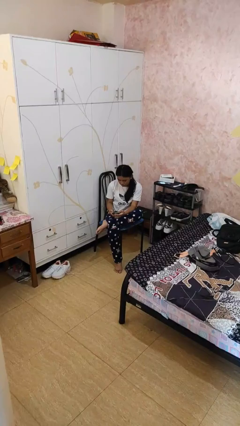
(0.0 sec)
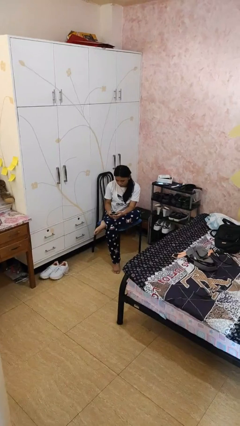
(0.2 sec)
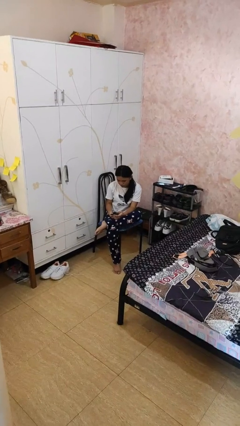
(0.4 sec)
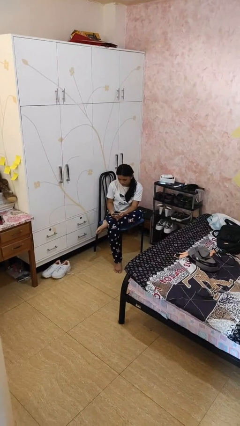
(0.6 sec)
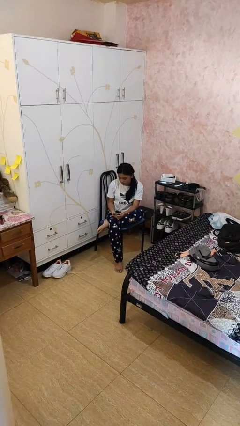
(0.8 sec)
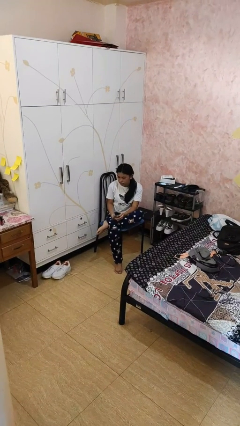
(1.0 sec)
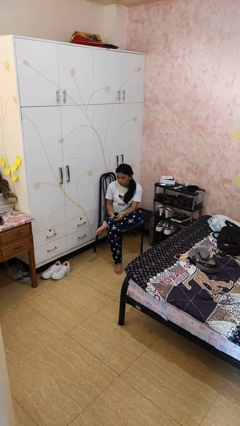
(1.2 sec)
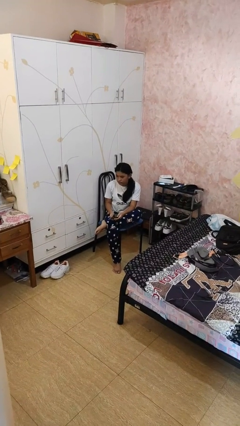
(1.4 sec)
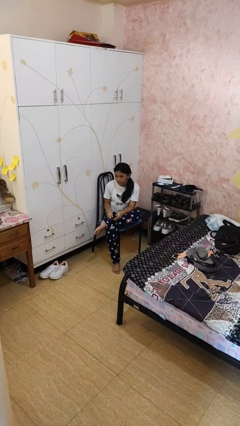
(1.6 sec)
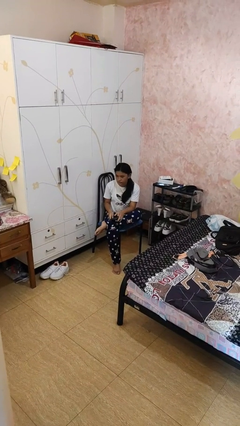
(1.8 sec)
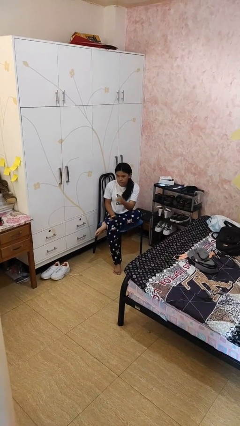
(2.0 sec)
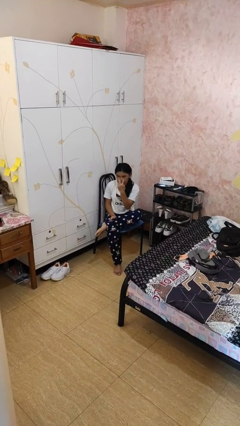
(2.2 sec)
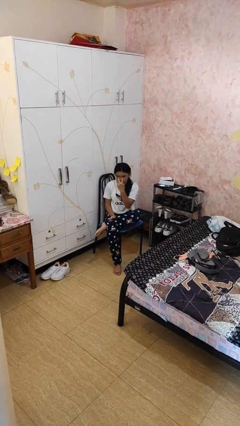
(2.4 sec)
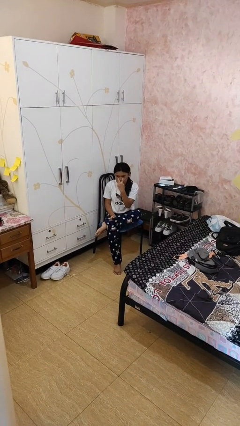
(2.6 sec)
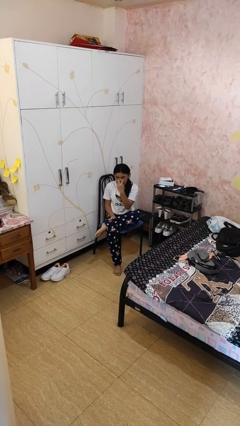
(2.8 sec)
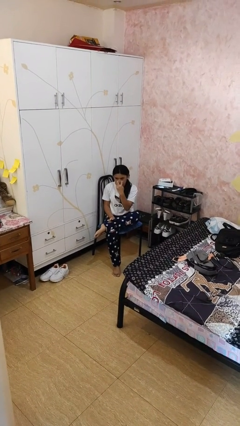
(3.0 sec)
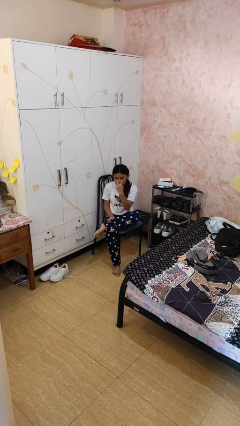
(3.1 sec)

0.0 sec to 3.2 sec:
person gestures watch closely

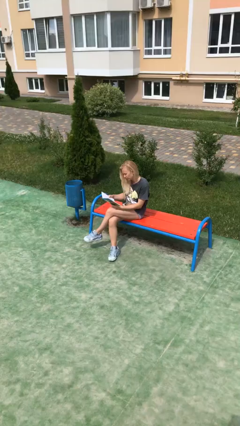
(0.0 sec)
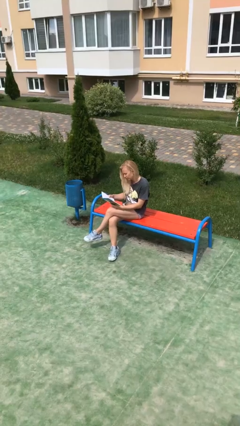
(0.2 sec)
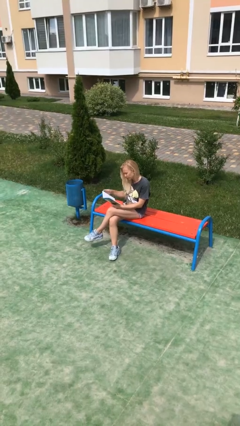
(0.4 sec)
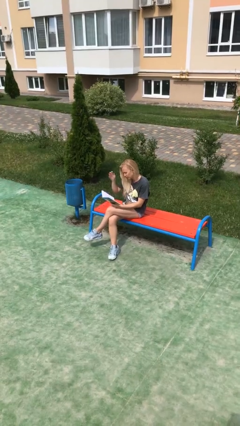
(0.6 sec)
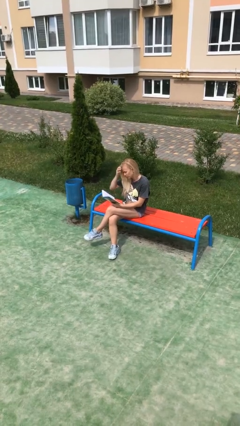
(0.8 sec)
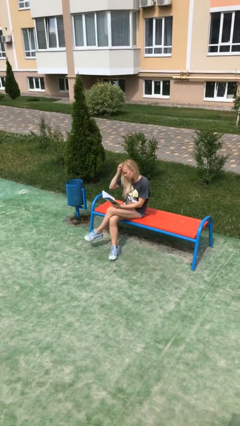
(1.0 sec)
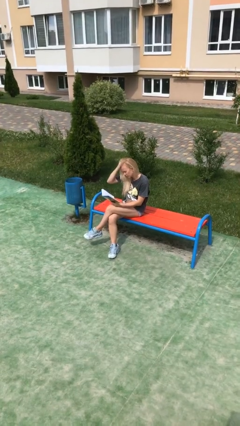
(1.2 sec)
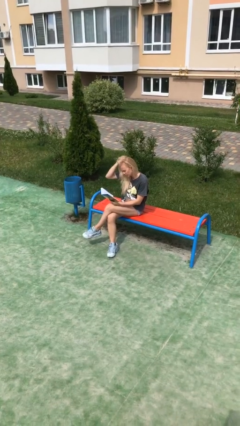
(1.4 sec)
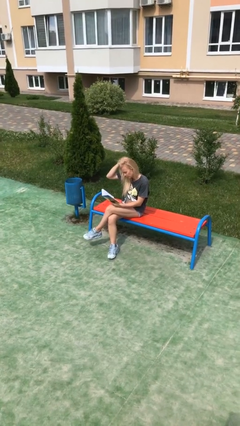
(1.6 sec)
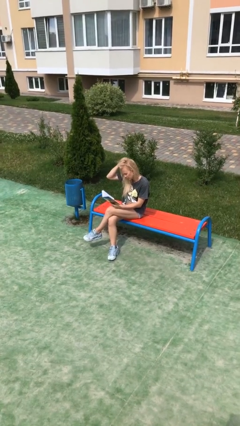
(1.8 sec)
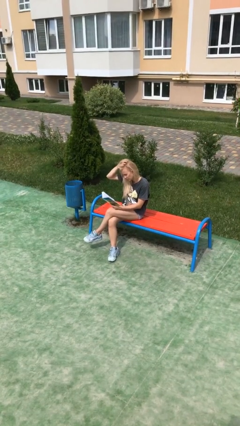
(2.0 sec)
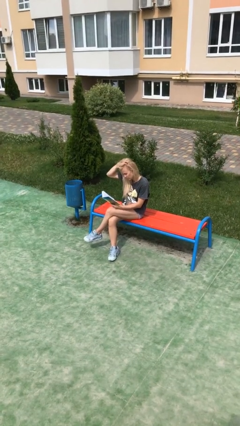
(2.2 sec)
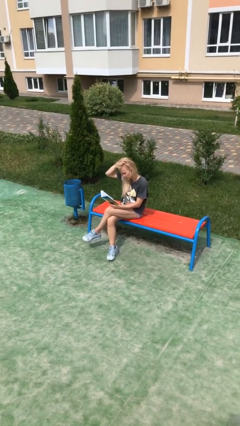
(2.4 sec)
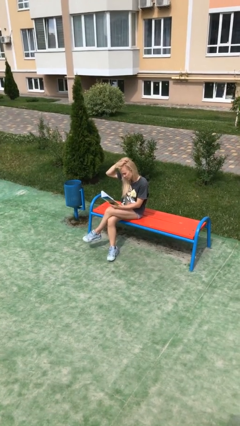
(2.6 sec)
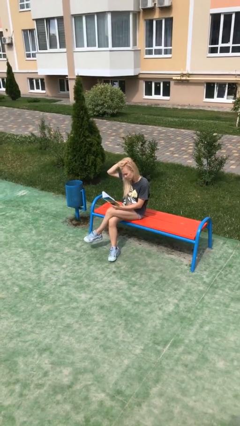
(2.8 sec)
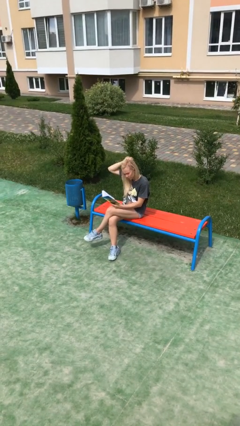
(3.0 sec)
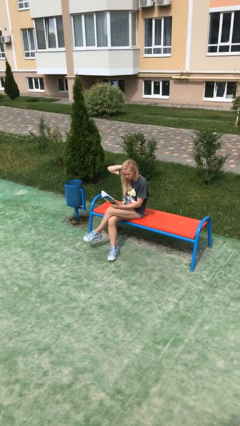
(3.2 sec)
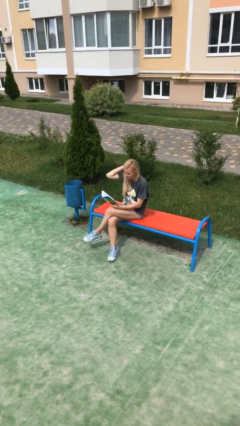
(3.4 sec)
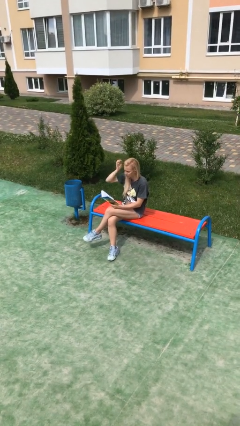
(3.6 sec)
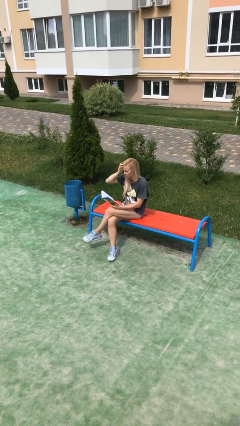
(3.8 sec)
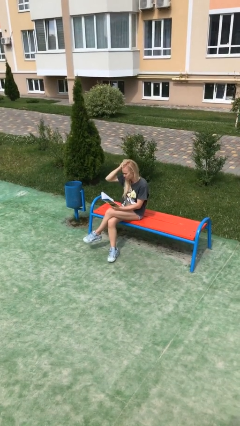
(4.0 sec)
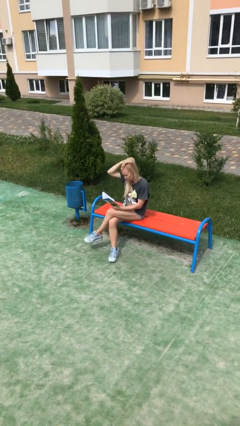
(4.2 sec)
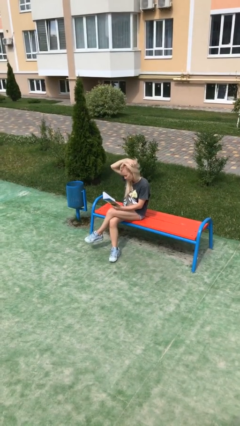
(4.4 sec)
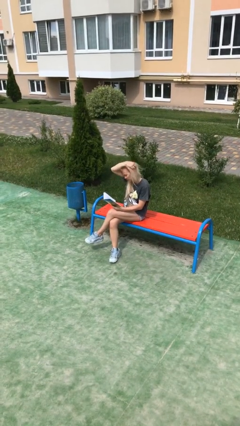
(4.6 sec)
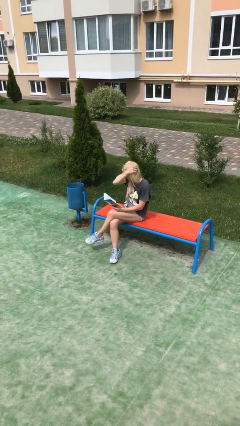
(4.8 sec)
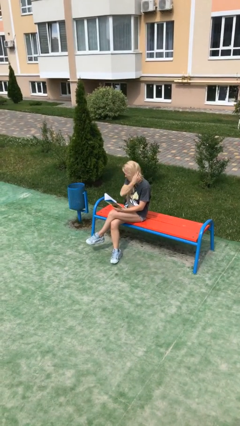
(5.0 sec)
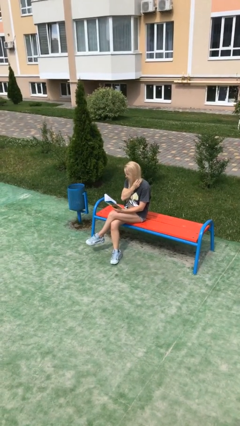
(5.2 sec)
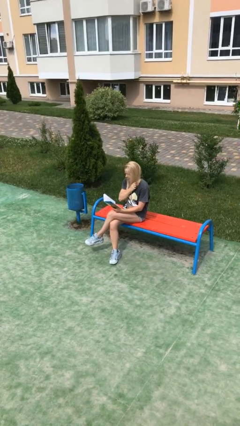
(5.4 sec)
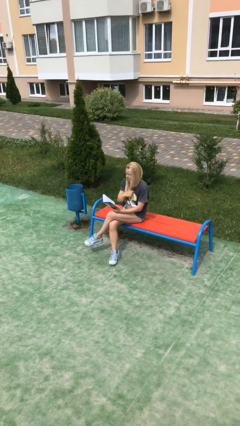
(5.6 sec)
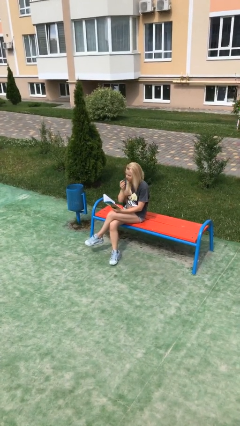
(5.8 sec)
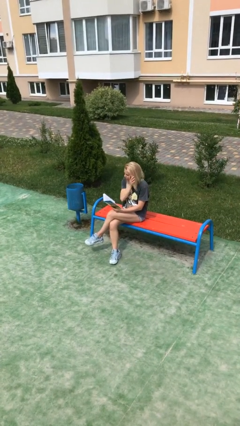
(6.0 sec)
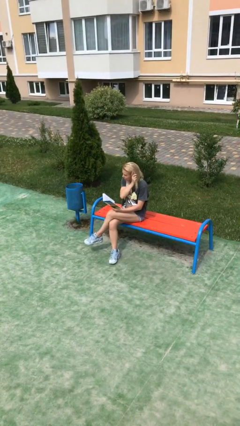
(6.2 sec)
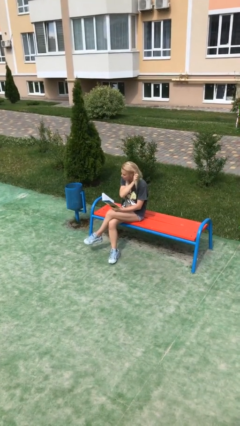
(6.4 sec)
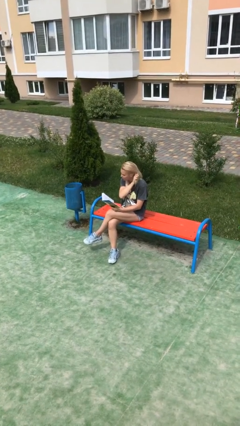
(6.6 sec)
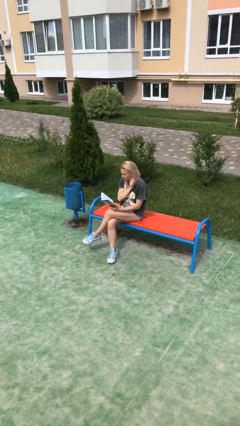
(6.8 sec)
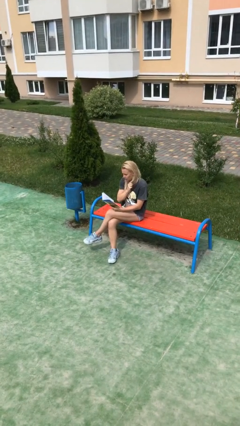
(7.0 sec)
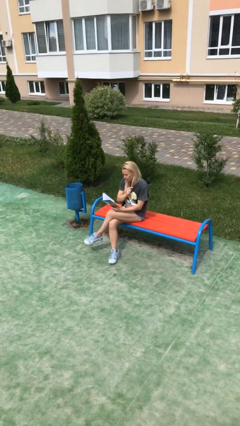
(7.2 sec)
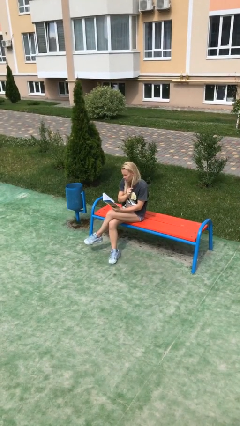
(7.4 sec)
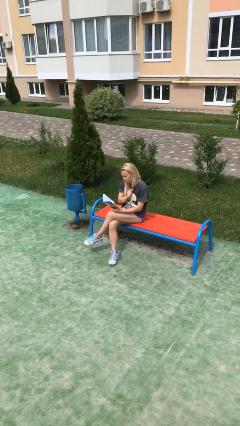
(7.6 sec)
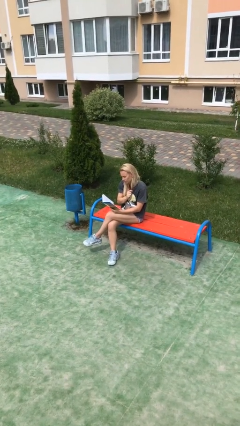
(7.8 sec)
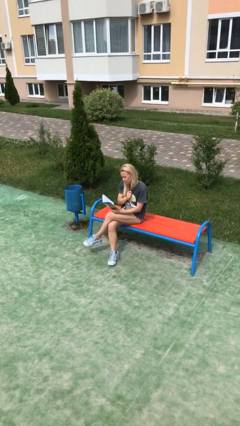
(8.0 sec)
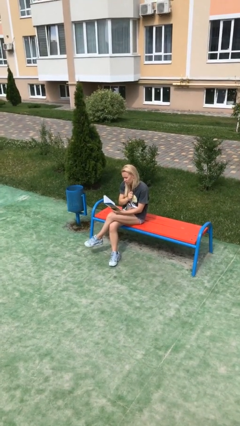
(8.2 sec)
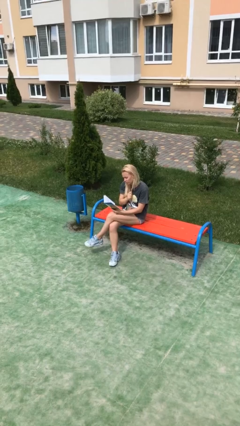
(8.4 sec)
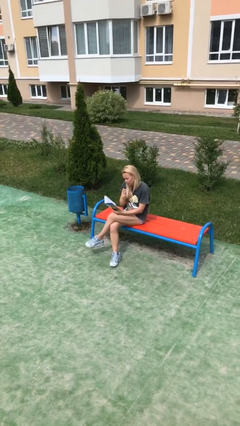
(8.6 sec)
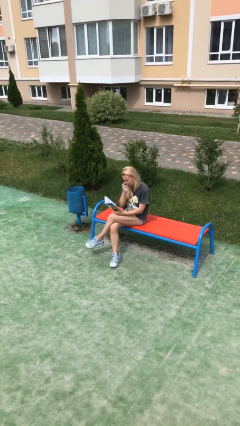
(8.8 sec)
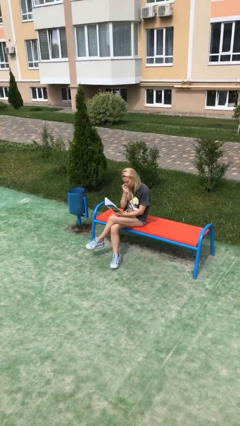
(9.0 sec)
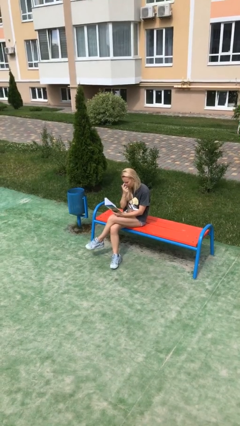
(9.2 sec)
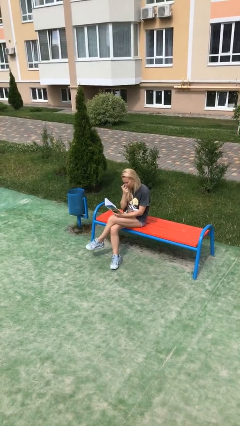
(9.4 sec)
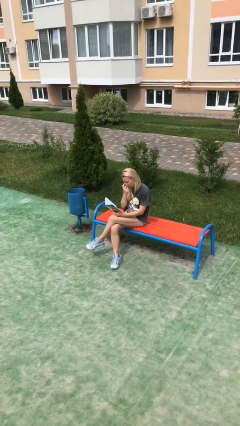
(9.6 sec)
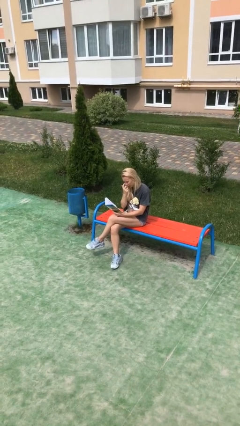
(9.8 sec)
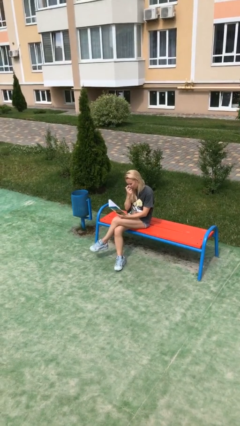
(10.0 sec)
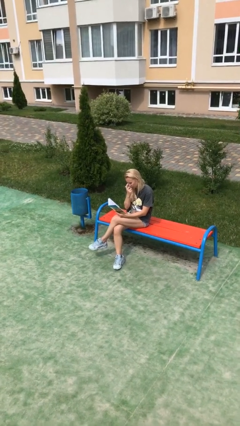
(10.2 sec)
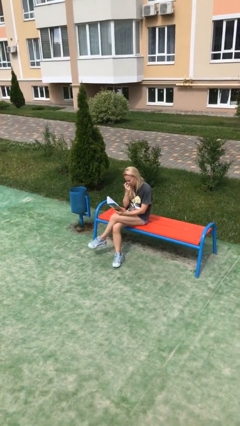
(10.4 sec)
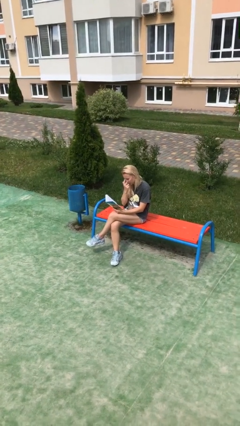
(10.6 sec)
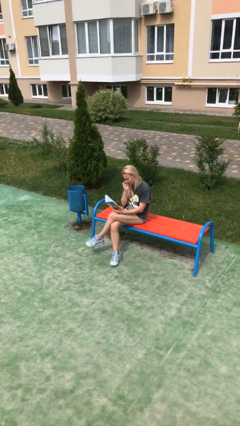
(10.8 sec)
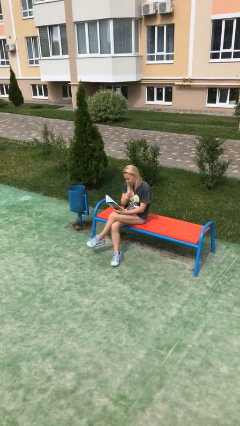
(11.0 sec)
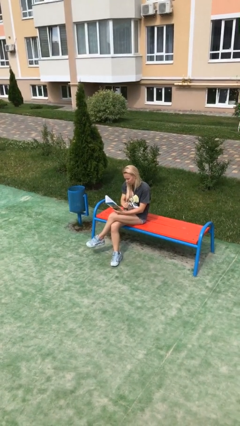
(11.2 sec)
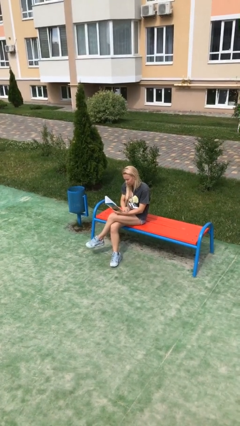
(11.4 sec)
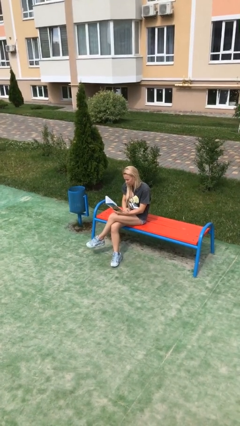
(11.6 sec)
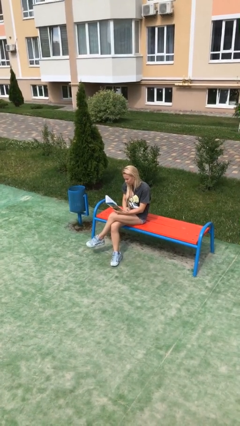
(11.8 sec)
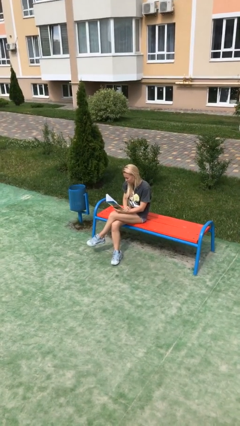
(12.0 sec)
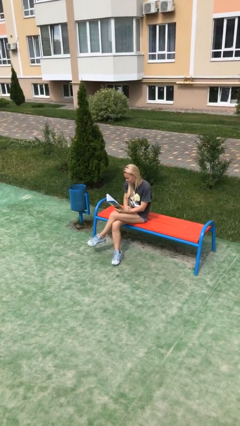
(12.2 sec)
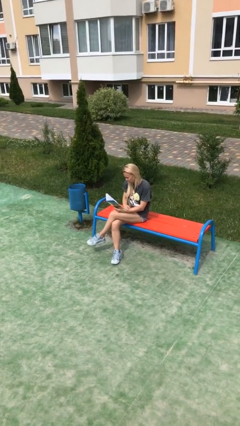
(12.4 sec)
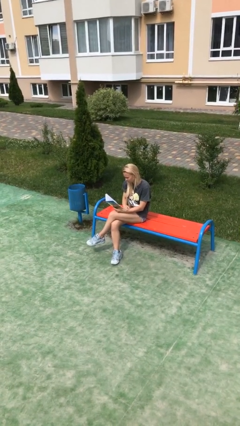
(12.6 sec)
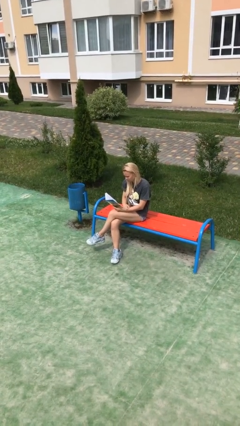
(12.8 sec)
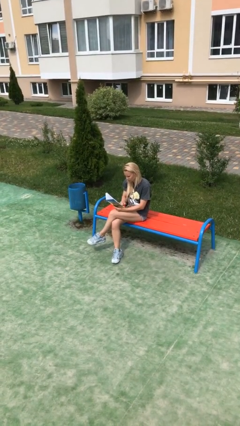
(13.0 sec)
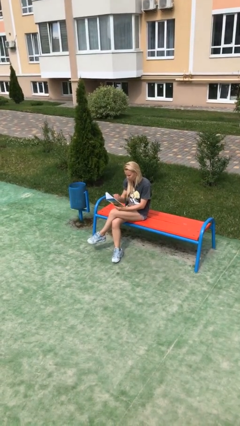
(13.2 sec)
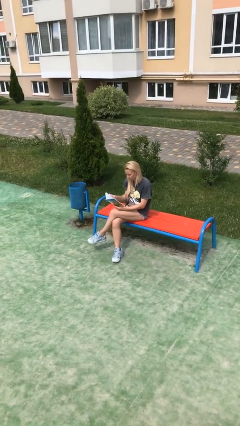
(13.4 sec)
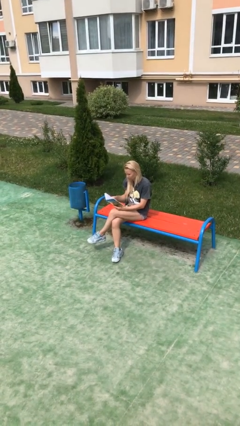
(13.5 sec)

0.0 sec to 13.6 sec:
person reads document

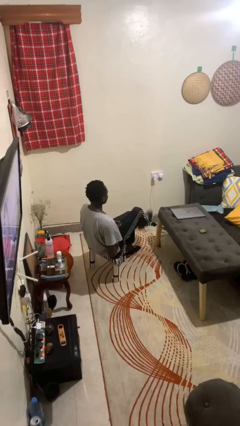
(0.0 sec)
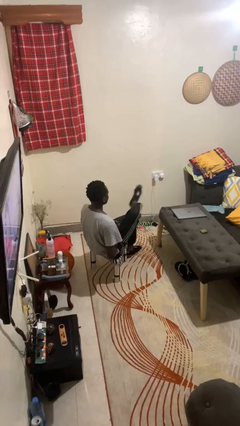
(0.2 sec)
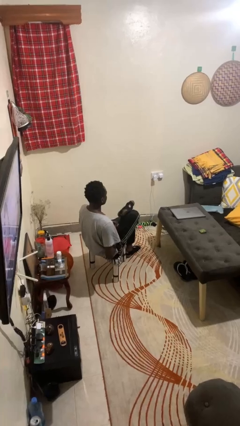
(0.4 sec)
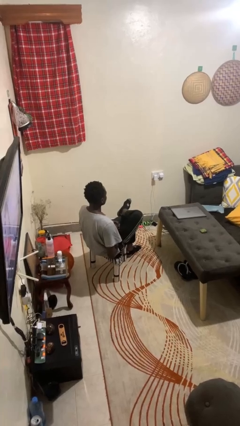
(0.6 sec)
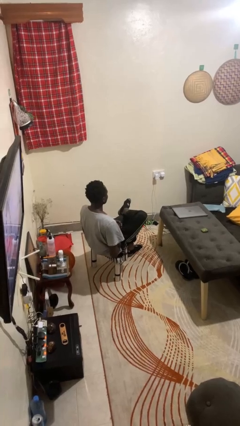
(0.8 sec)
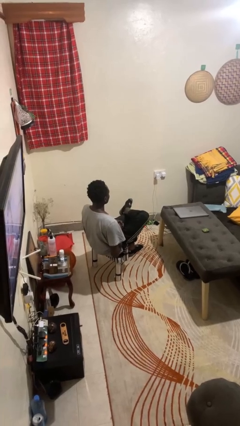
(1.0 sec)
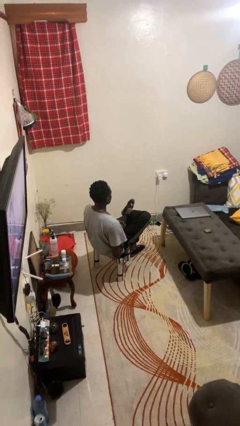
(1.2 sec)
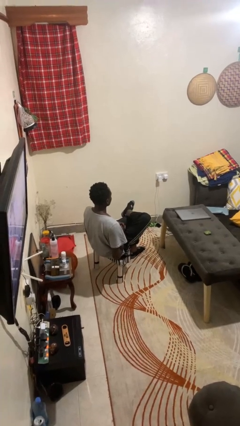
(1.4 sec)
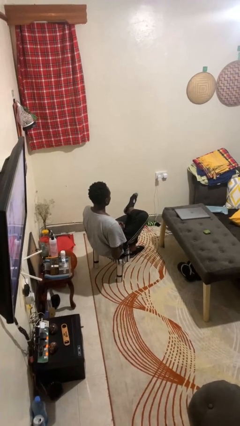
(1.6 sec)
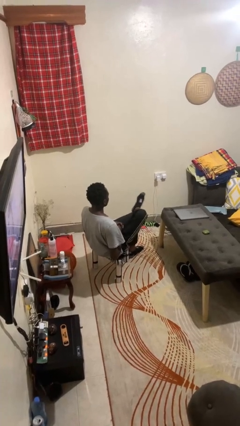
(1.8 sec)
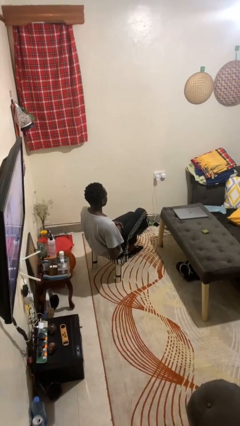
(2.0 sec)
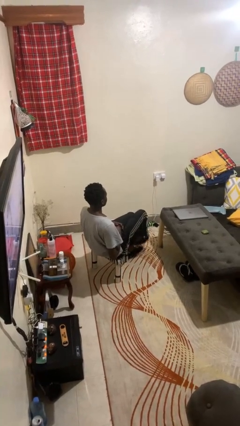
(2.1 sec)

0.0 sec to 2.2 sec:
person crosses legs
